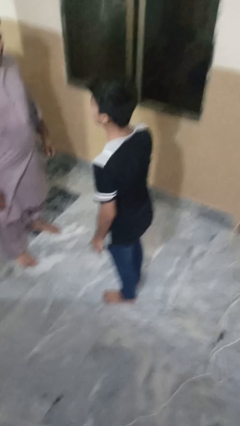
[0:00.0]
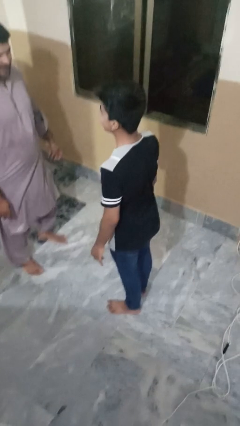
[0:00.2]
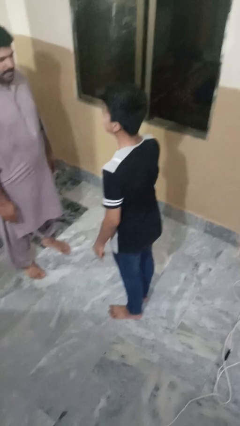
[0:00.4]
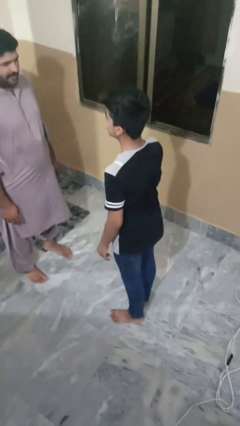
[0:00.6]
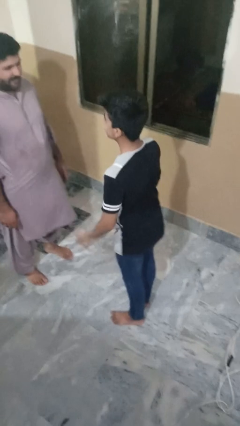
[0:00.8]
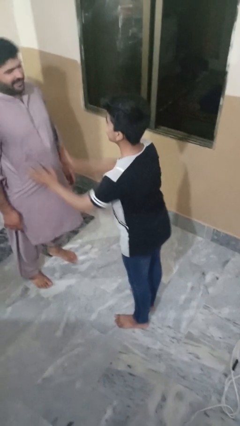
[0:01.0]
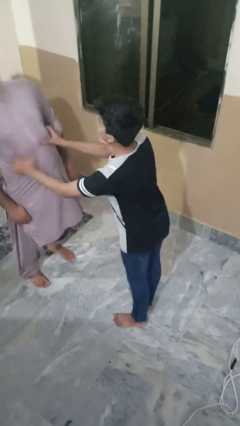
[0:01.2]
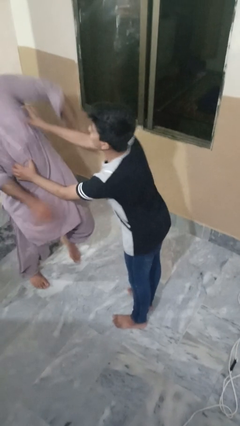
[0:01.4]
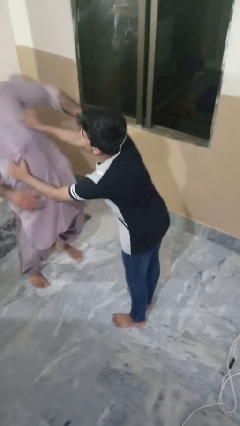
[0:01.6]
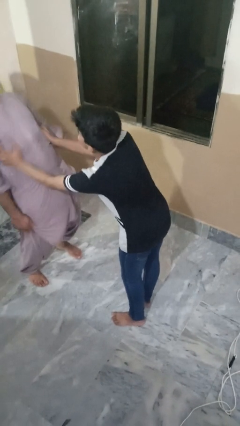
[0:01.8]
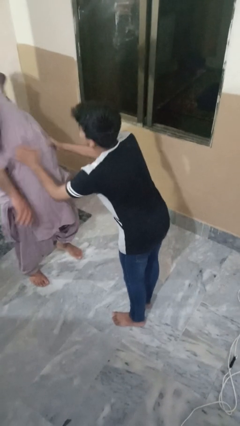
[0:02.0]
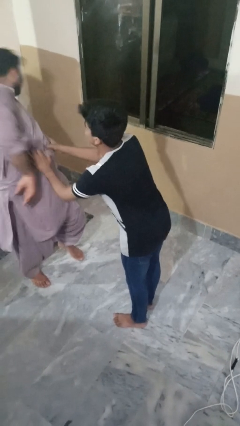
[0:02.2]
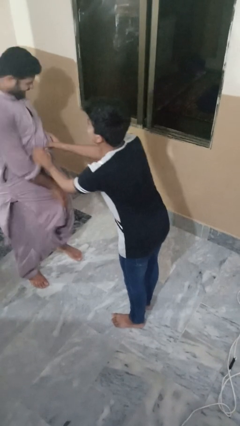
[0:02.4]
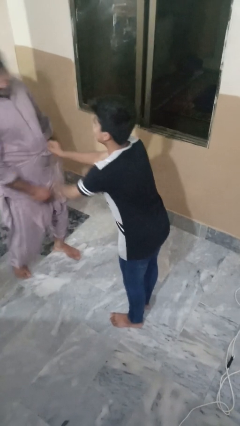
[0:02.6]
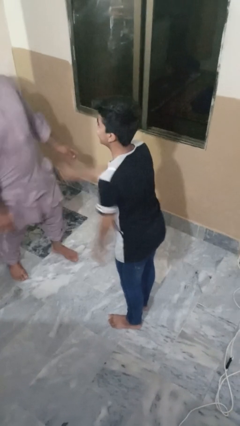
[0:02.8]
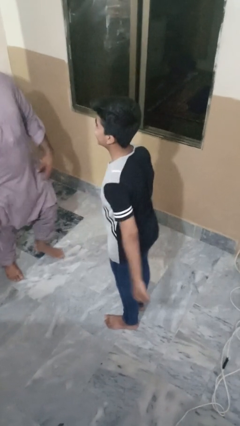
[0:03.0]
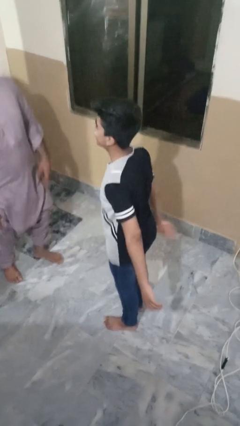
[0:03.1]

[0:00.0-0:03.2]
person tickles person

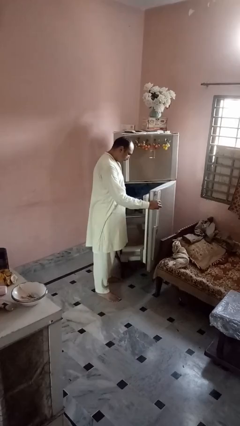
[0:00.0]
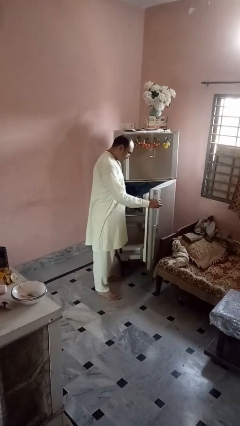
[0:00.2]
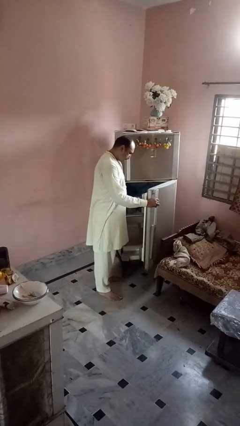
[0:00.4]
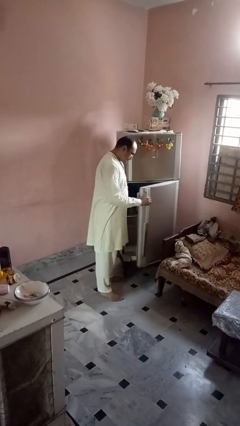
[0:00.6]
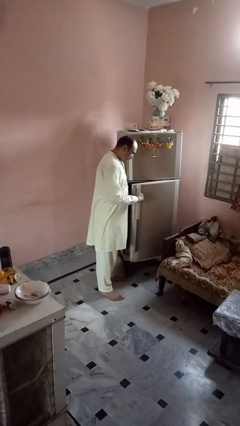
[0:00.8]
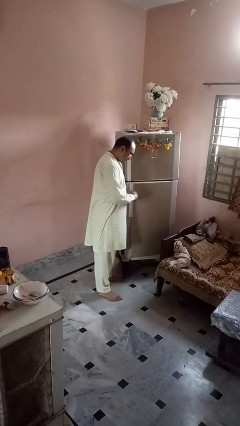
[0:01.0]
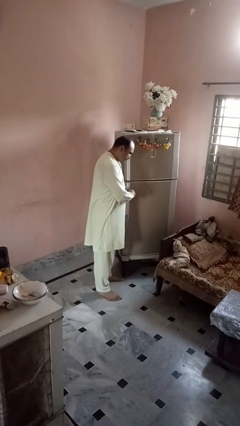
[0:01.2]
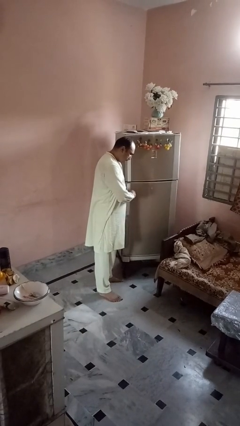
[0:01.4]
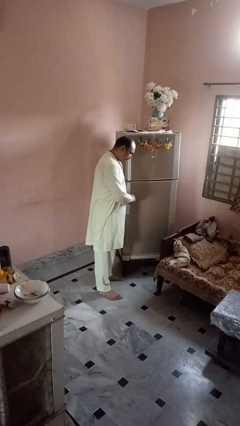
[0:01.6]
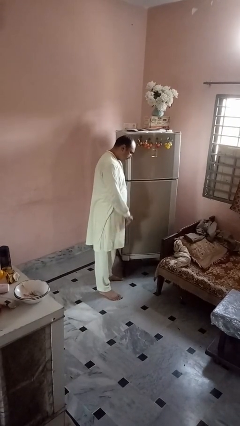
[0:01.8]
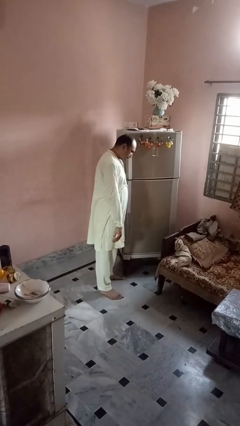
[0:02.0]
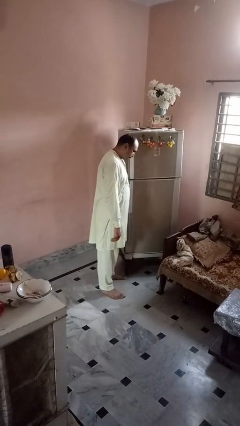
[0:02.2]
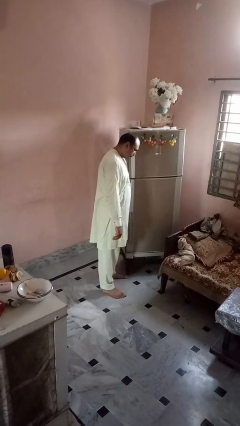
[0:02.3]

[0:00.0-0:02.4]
person closes refrigerator

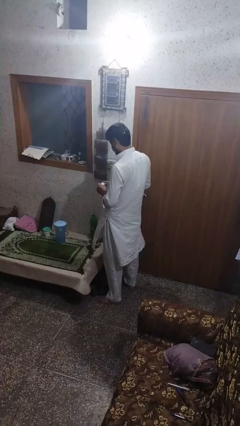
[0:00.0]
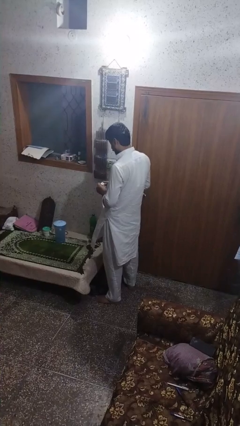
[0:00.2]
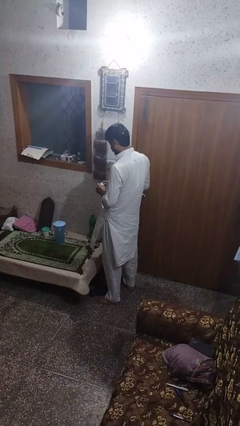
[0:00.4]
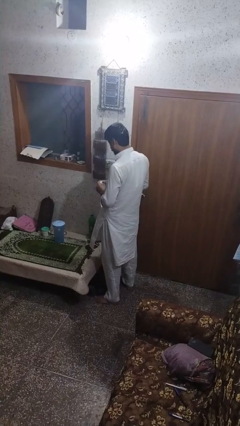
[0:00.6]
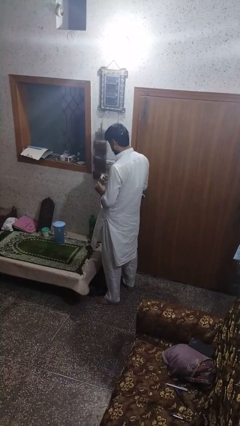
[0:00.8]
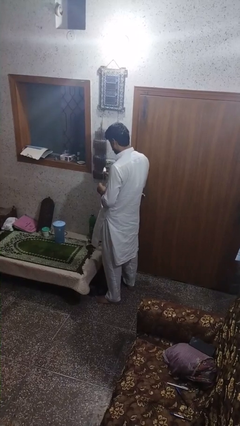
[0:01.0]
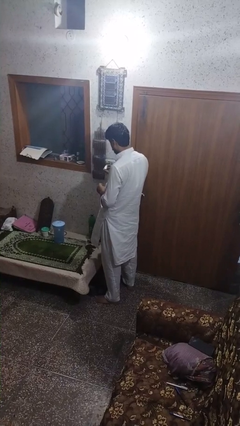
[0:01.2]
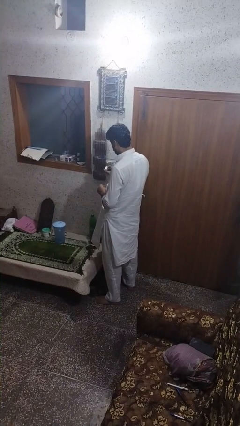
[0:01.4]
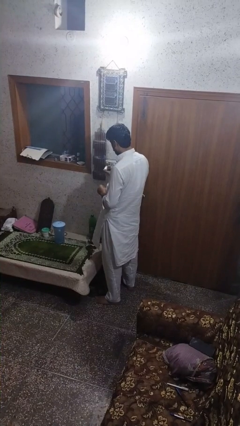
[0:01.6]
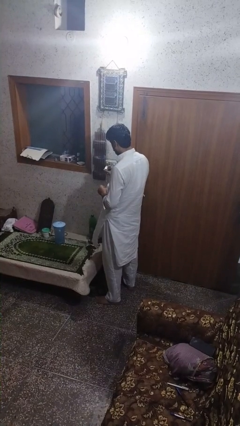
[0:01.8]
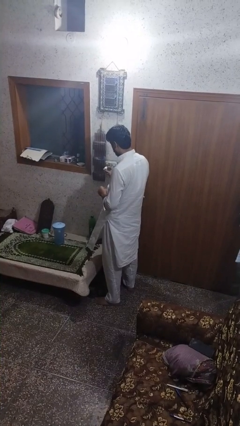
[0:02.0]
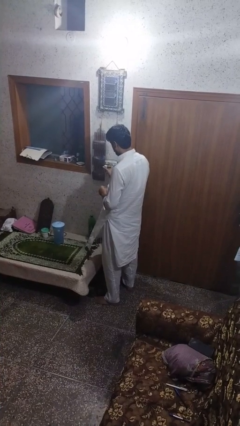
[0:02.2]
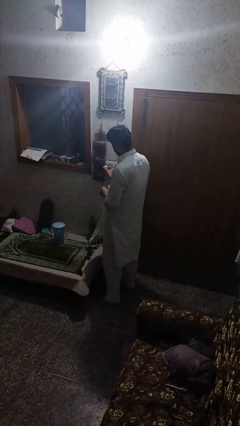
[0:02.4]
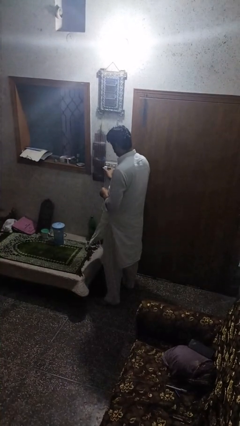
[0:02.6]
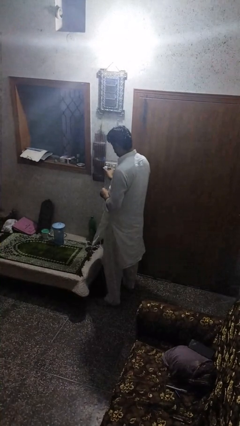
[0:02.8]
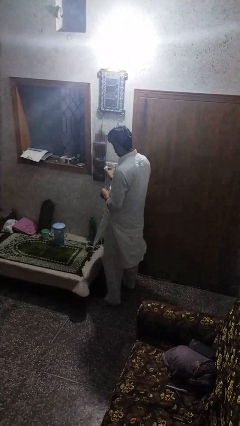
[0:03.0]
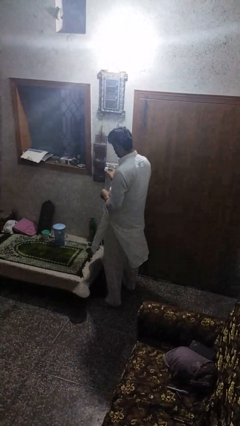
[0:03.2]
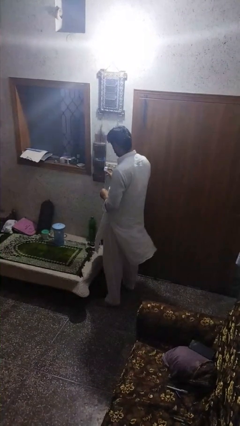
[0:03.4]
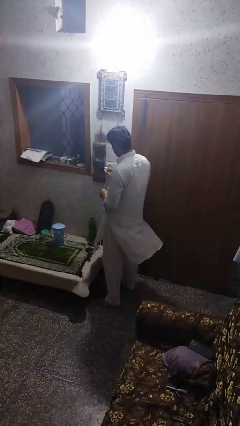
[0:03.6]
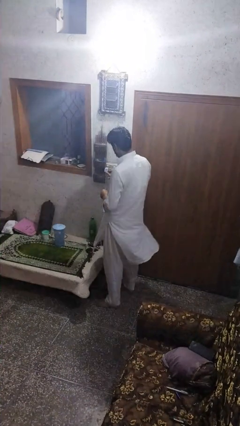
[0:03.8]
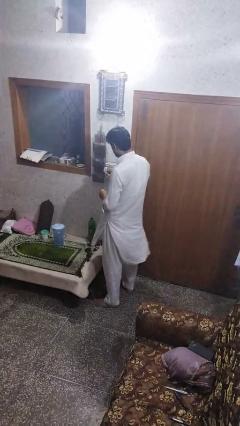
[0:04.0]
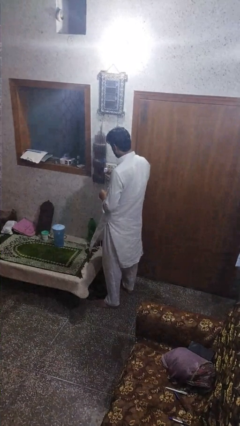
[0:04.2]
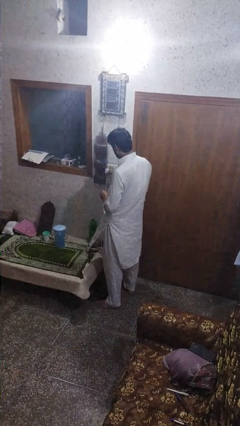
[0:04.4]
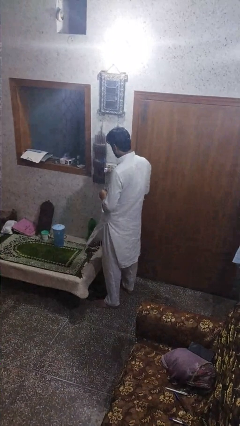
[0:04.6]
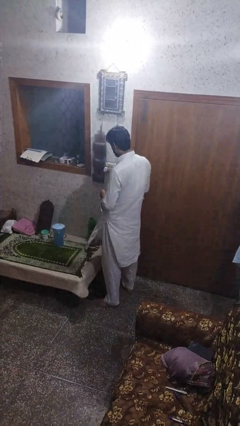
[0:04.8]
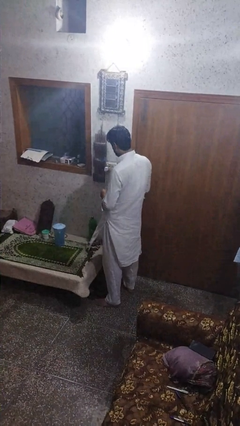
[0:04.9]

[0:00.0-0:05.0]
person plugs into electrical socket

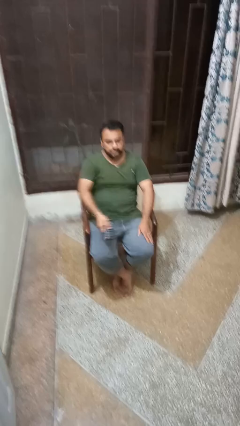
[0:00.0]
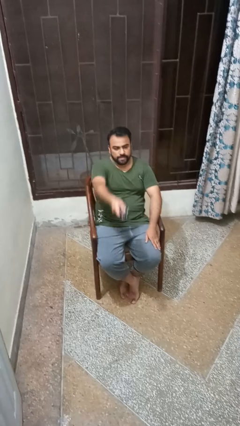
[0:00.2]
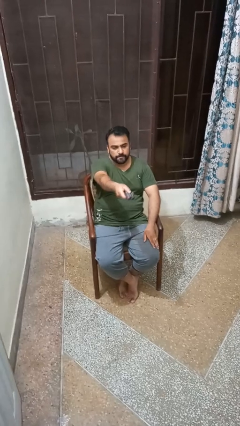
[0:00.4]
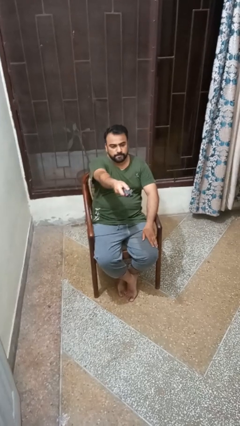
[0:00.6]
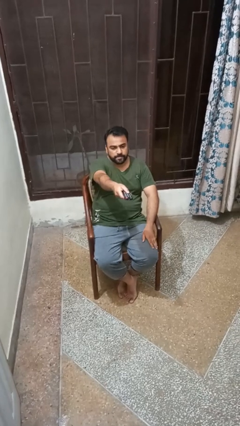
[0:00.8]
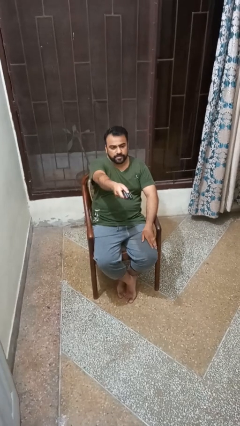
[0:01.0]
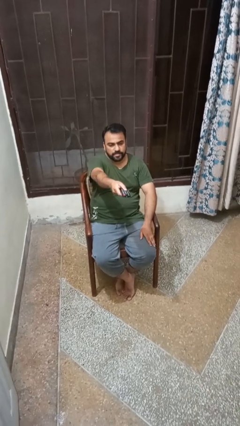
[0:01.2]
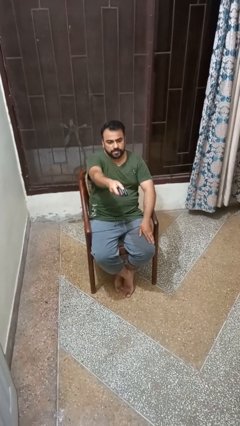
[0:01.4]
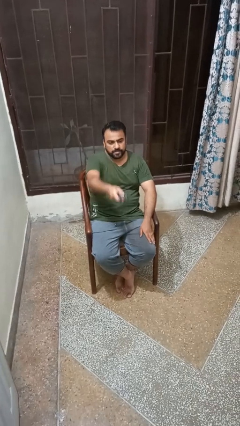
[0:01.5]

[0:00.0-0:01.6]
person uses television remote

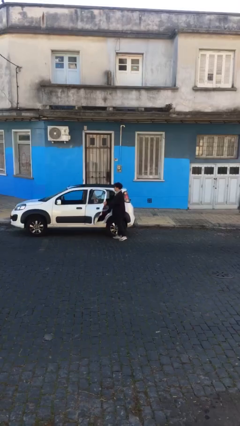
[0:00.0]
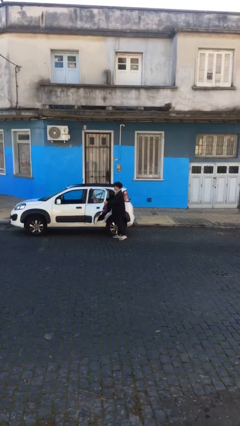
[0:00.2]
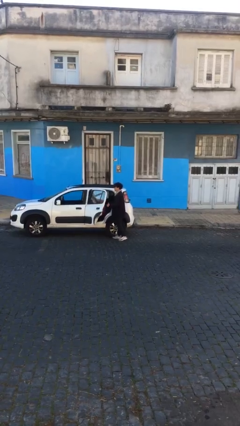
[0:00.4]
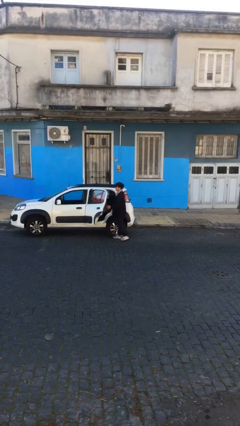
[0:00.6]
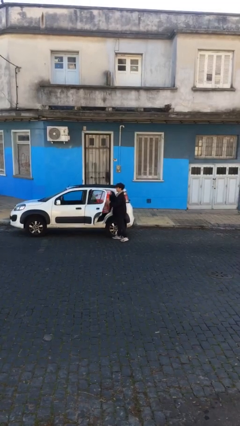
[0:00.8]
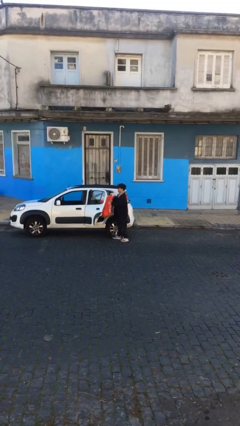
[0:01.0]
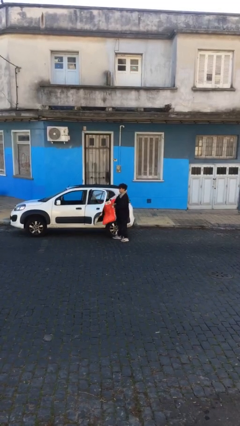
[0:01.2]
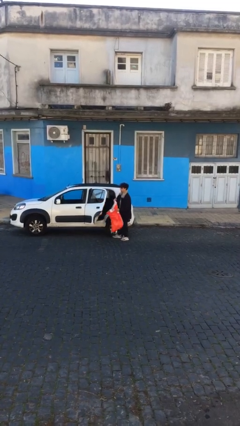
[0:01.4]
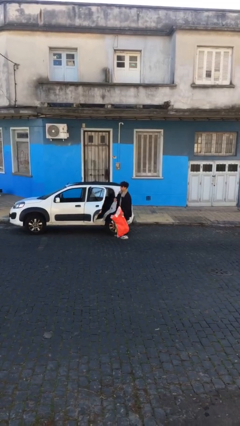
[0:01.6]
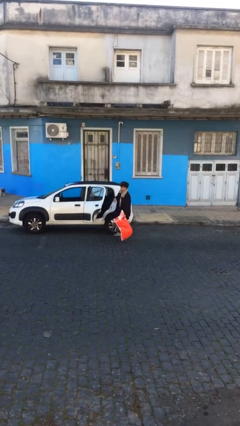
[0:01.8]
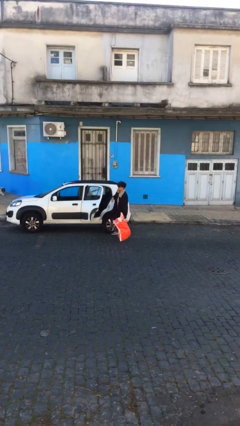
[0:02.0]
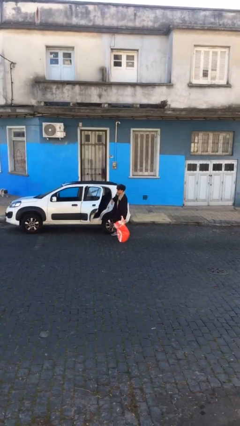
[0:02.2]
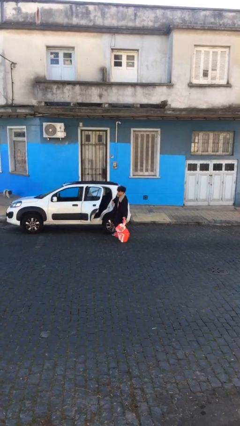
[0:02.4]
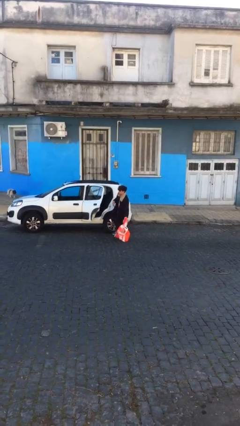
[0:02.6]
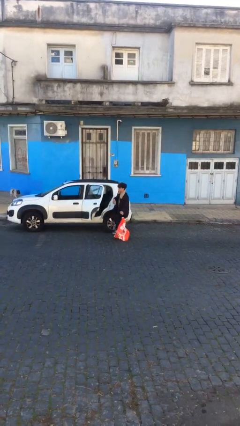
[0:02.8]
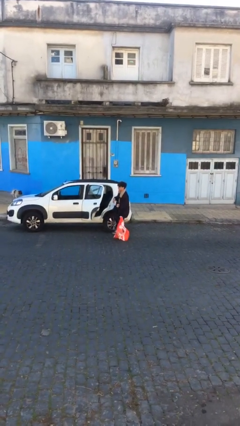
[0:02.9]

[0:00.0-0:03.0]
person unloads car

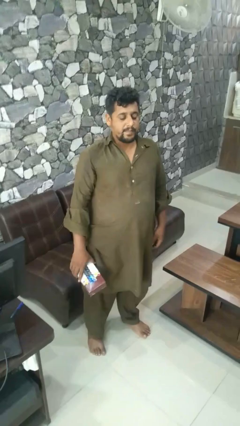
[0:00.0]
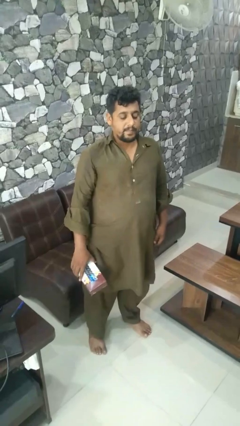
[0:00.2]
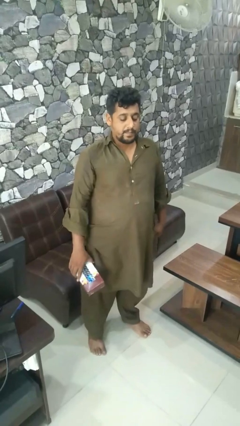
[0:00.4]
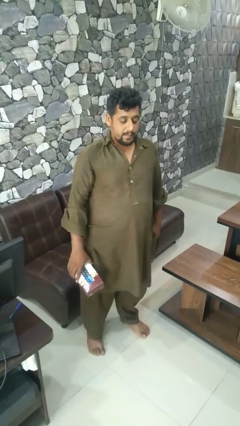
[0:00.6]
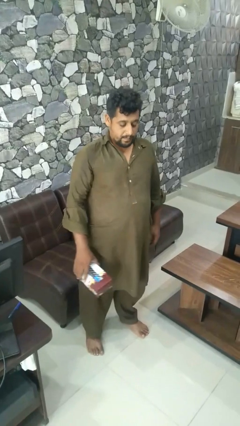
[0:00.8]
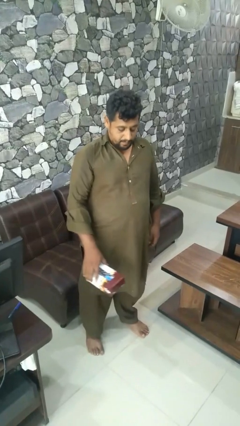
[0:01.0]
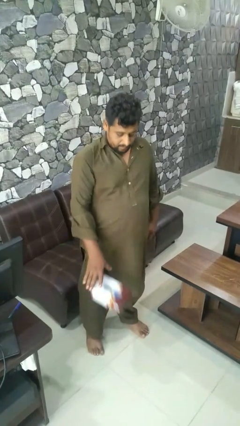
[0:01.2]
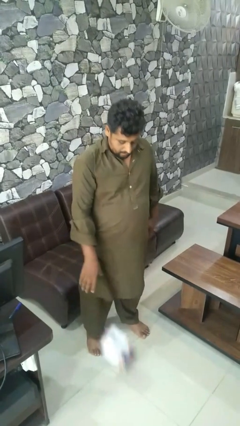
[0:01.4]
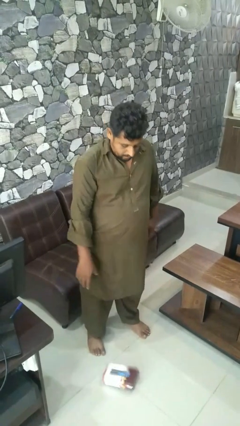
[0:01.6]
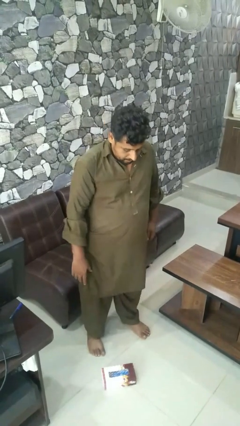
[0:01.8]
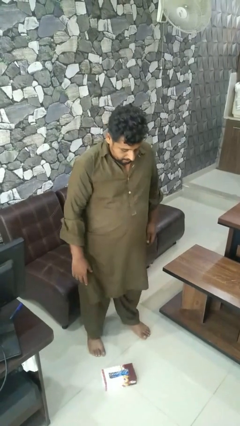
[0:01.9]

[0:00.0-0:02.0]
person throws object to ground
